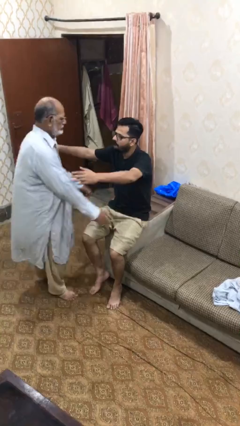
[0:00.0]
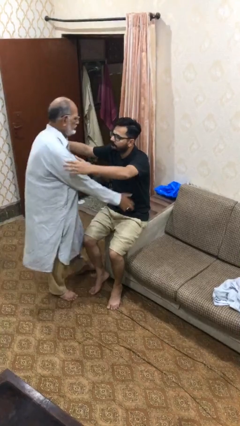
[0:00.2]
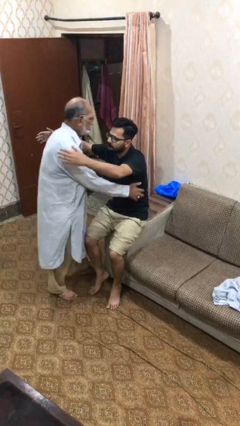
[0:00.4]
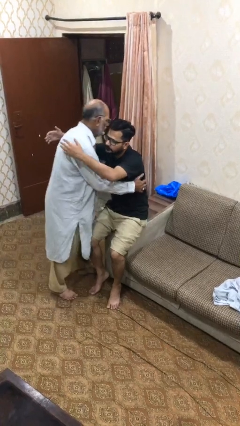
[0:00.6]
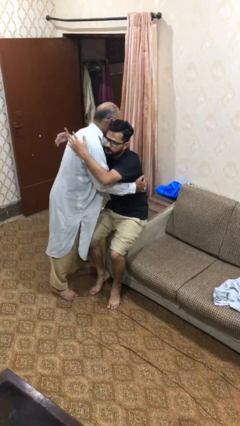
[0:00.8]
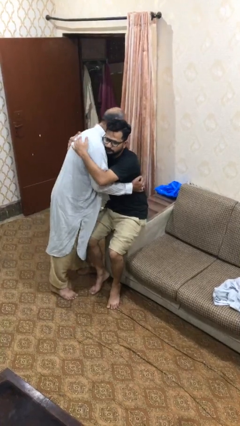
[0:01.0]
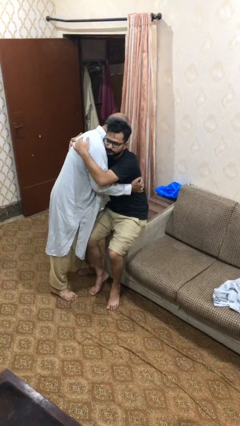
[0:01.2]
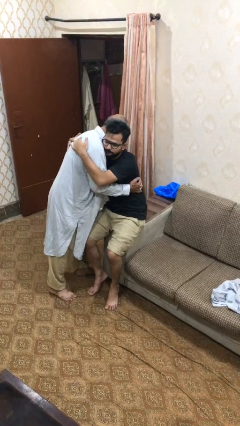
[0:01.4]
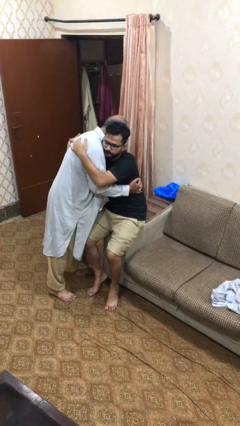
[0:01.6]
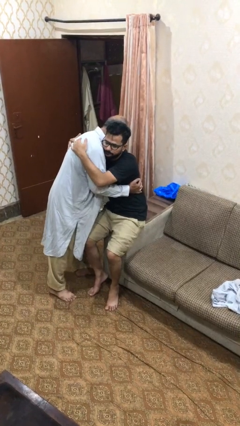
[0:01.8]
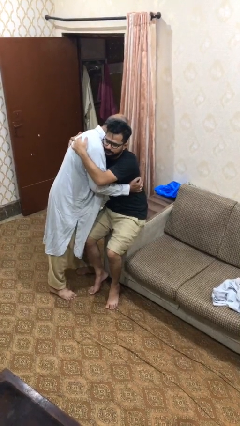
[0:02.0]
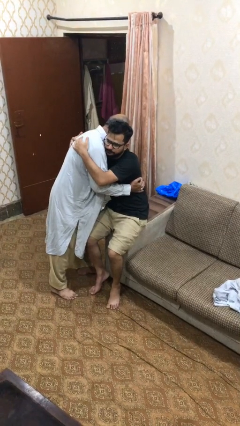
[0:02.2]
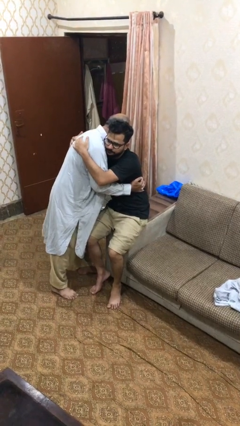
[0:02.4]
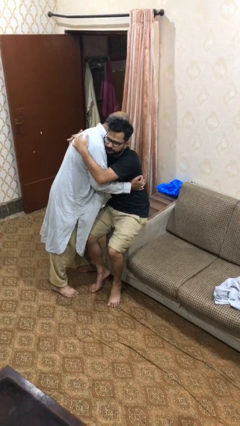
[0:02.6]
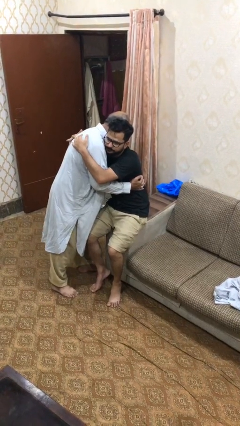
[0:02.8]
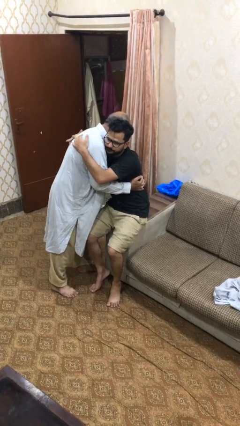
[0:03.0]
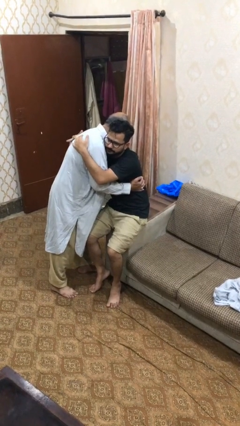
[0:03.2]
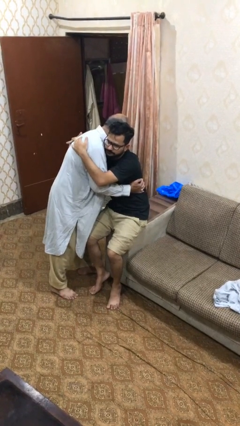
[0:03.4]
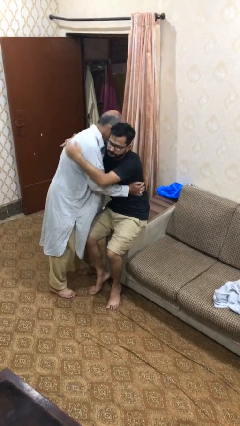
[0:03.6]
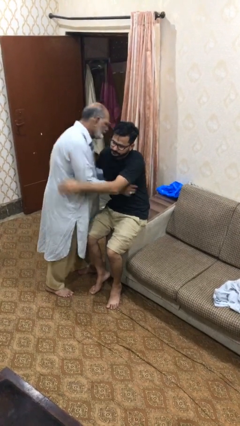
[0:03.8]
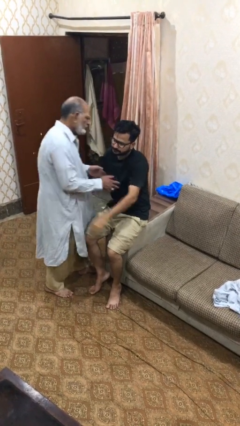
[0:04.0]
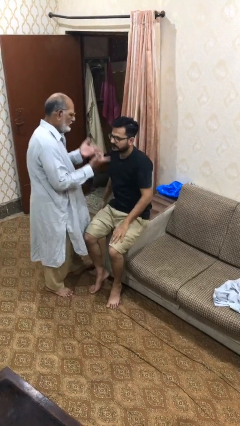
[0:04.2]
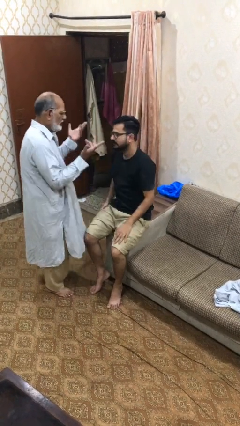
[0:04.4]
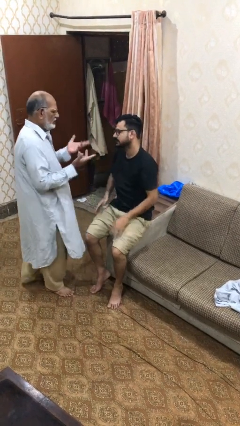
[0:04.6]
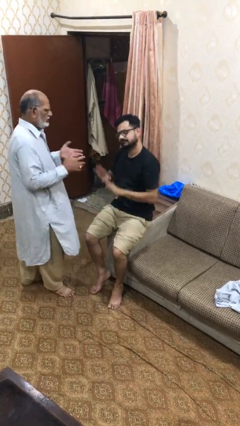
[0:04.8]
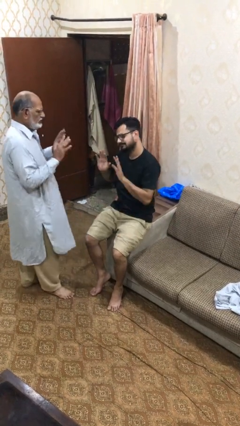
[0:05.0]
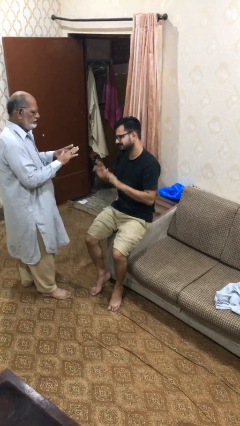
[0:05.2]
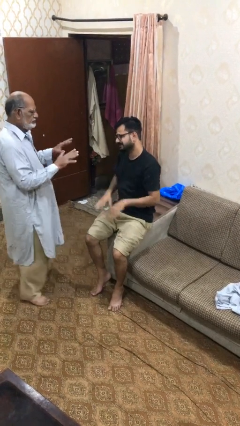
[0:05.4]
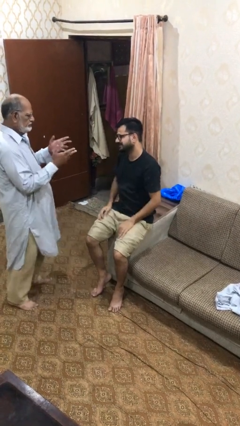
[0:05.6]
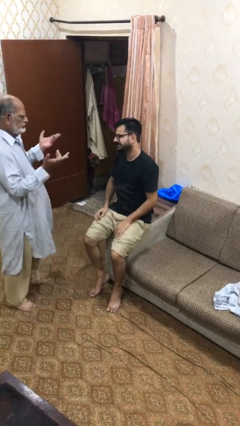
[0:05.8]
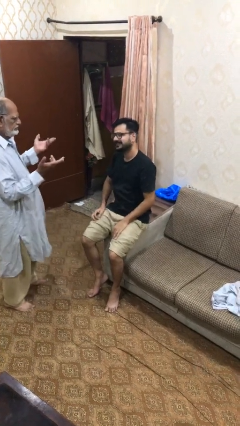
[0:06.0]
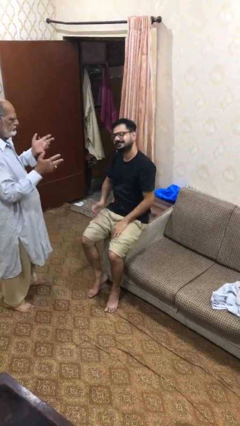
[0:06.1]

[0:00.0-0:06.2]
person embraces person

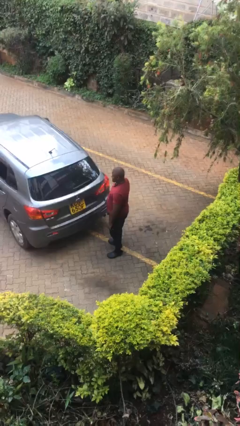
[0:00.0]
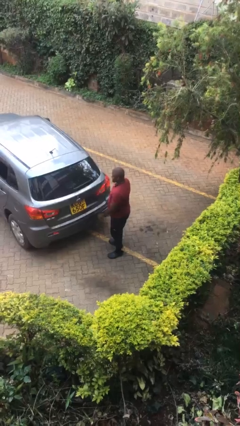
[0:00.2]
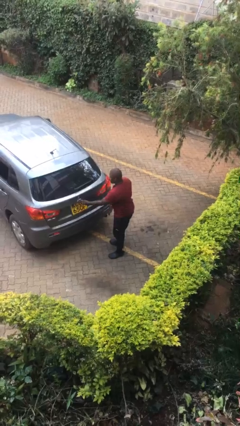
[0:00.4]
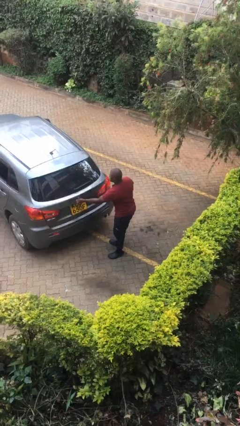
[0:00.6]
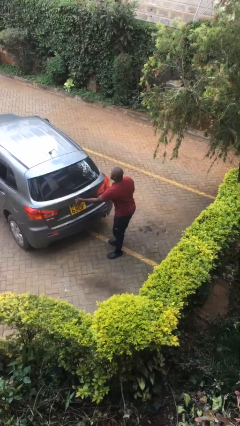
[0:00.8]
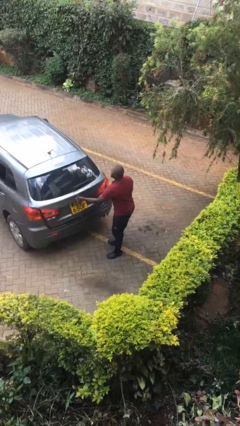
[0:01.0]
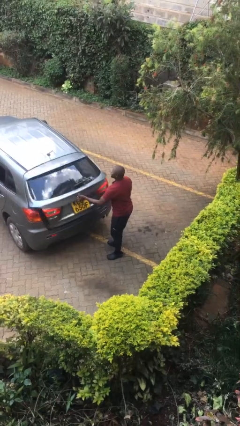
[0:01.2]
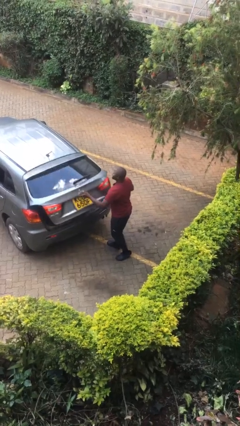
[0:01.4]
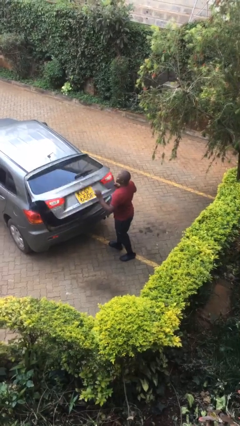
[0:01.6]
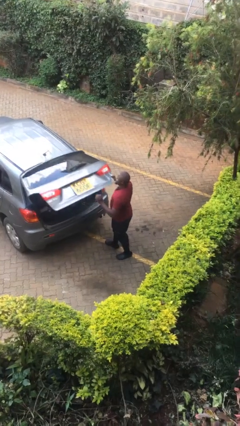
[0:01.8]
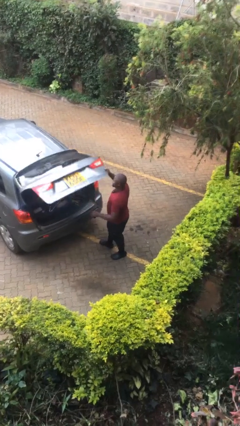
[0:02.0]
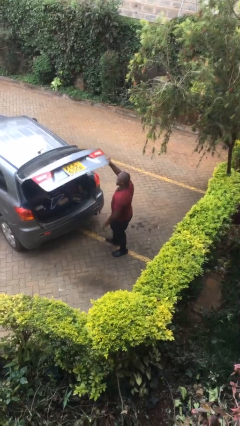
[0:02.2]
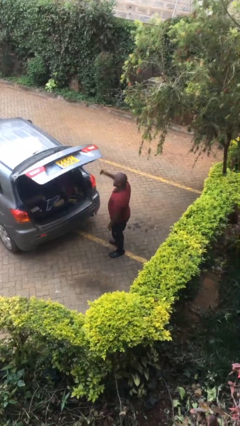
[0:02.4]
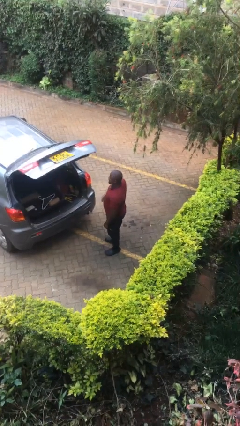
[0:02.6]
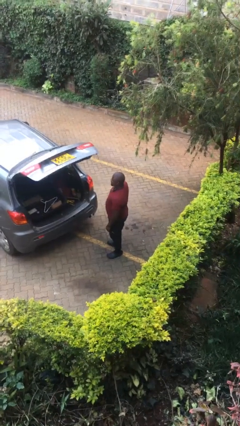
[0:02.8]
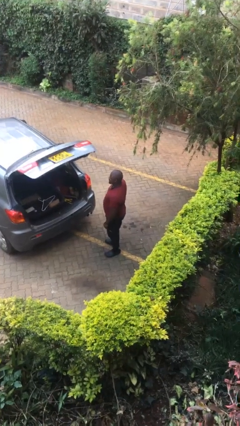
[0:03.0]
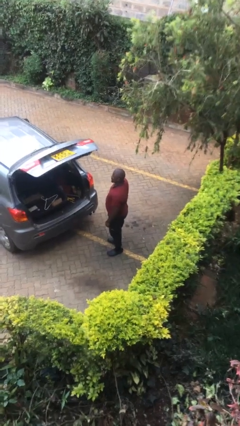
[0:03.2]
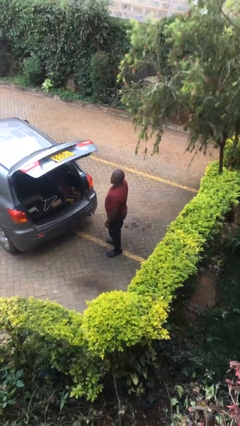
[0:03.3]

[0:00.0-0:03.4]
person opens car trunk

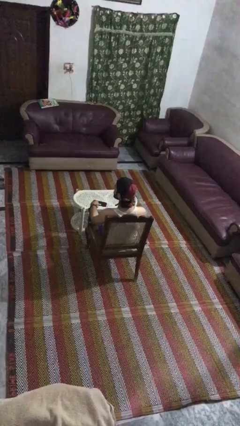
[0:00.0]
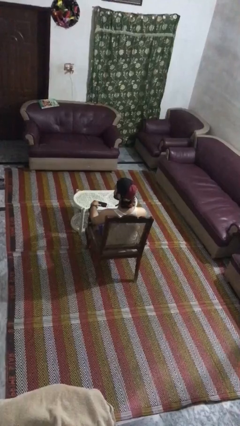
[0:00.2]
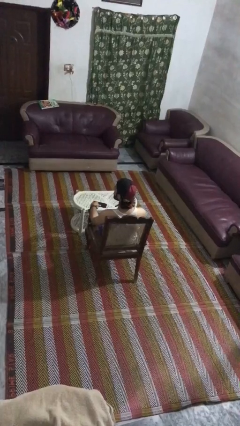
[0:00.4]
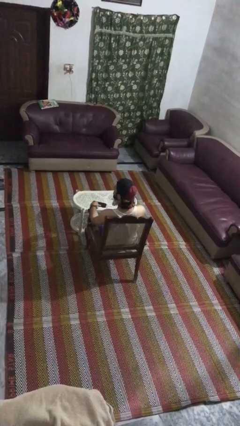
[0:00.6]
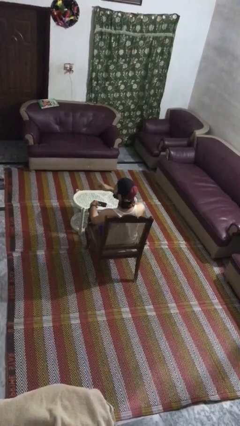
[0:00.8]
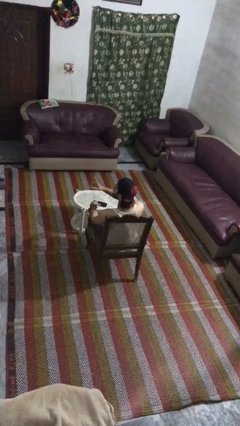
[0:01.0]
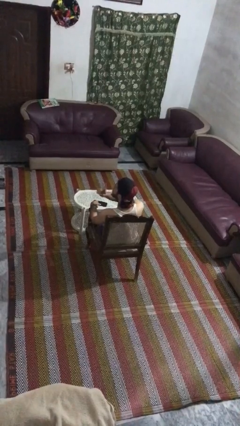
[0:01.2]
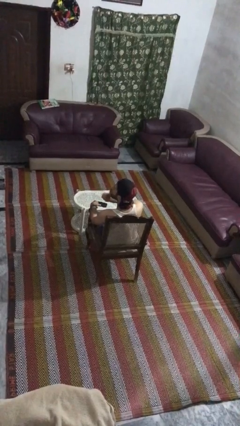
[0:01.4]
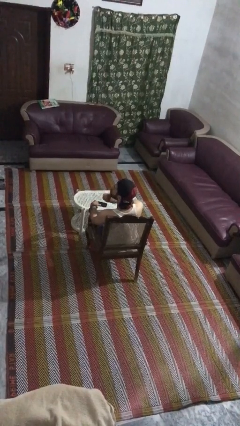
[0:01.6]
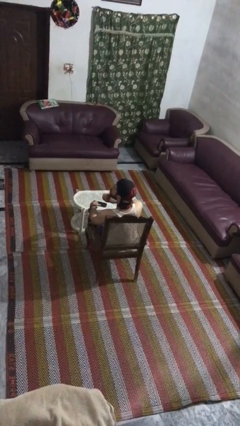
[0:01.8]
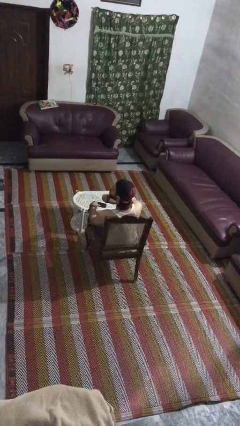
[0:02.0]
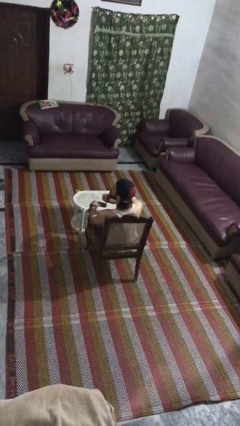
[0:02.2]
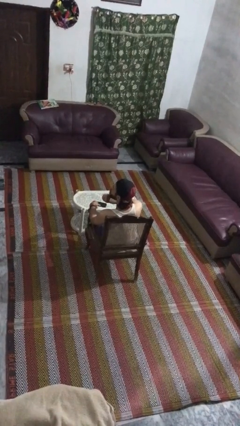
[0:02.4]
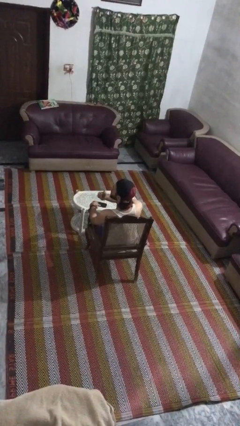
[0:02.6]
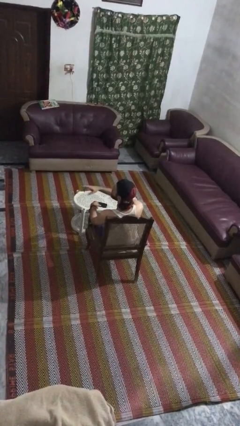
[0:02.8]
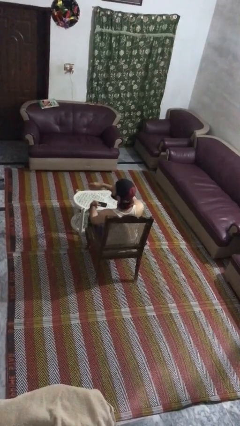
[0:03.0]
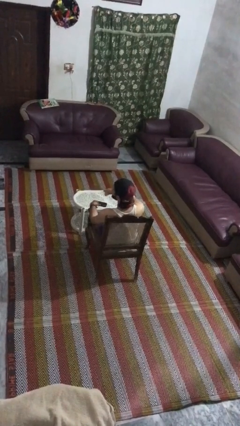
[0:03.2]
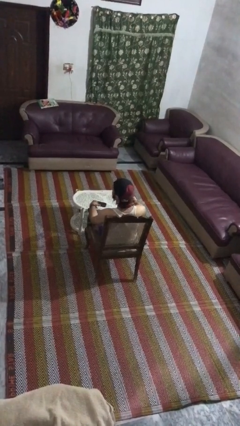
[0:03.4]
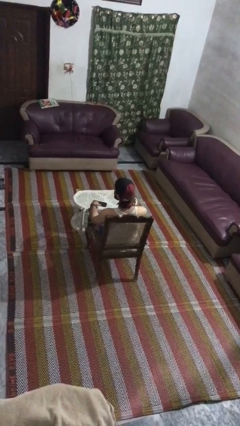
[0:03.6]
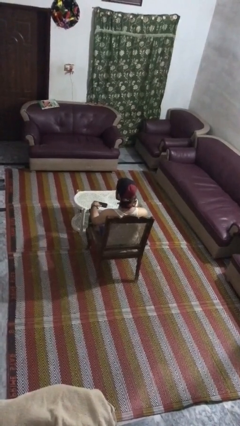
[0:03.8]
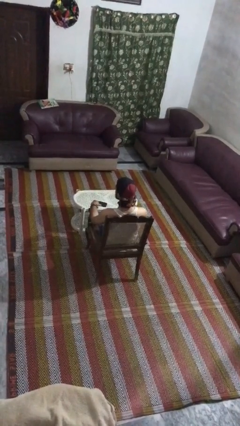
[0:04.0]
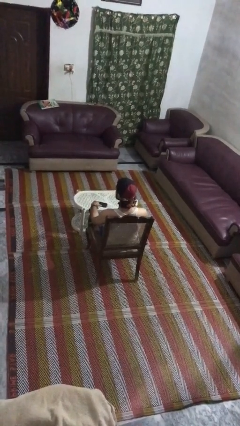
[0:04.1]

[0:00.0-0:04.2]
person gestures be quiet

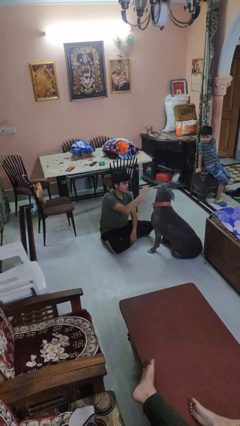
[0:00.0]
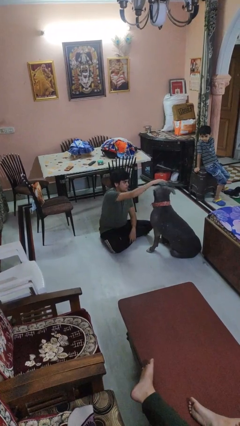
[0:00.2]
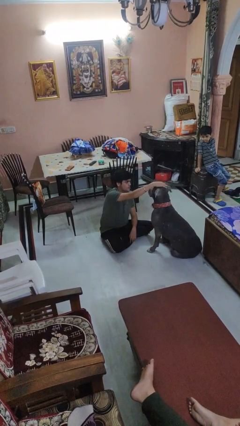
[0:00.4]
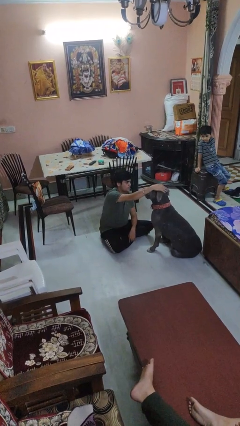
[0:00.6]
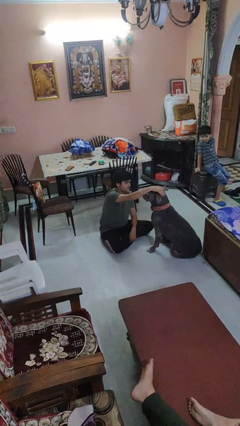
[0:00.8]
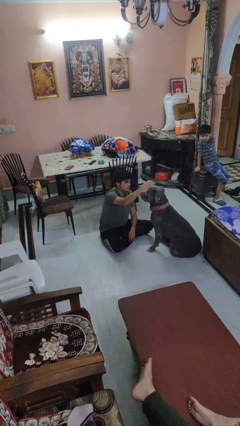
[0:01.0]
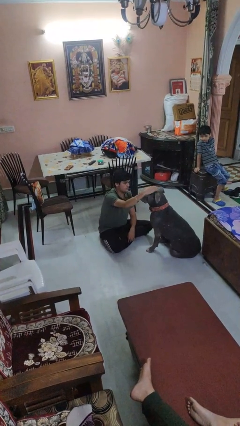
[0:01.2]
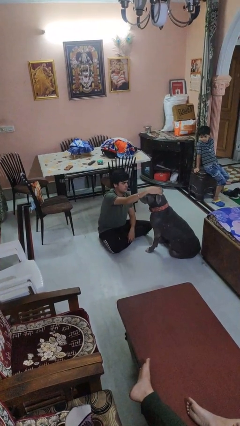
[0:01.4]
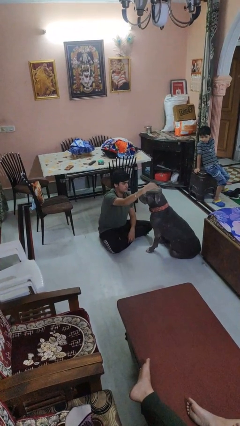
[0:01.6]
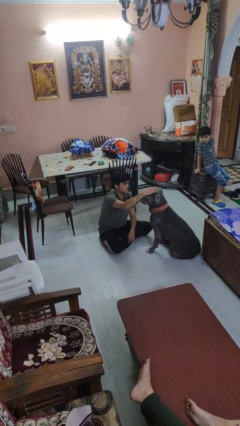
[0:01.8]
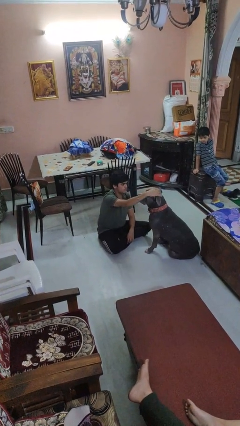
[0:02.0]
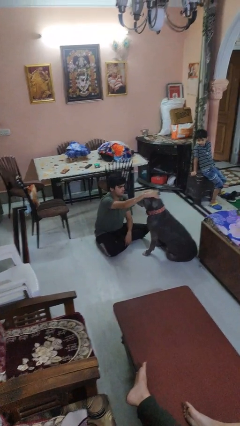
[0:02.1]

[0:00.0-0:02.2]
person pets dog

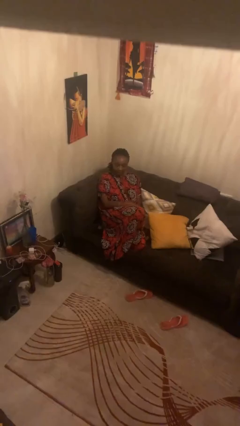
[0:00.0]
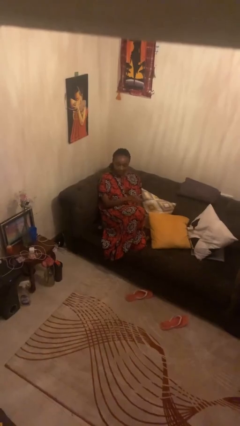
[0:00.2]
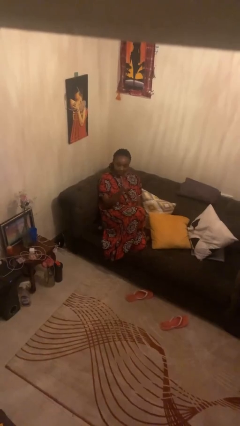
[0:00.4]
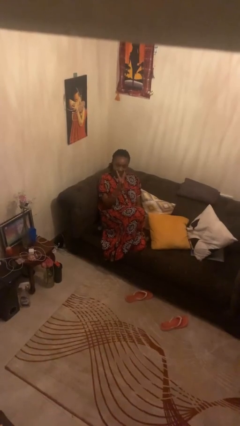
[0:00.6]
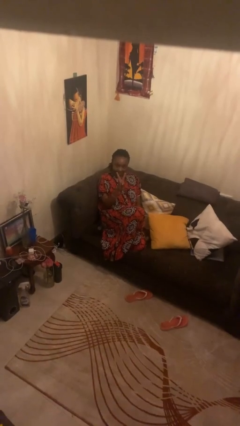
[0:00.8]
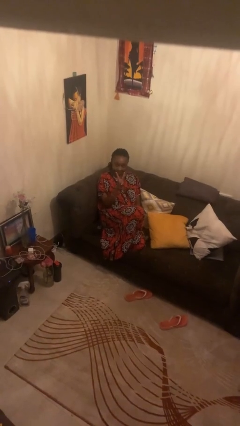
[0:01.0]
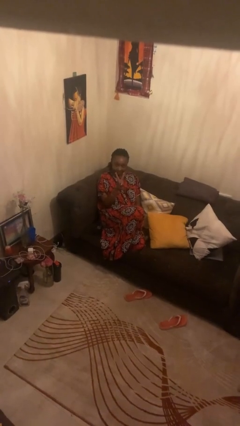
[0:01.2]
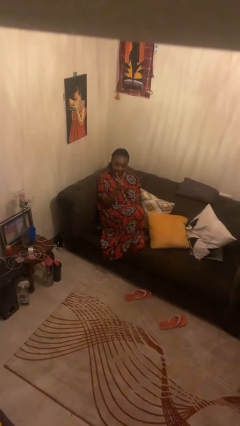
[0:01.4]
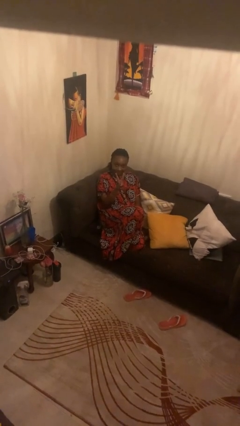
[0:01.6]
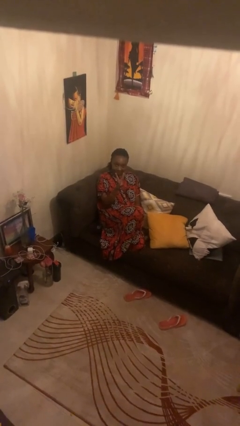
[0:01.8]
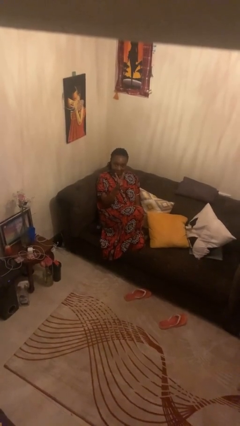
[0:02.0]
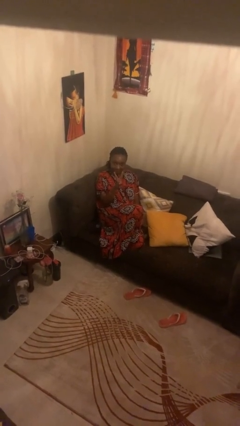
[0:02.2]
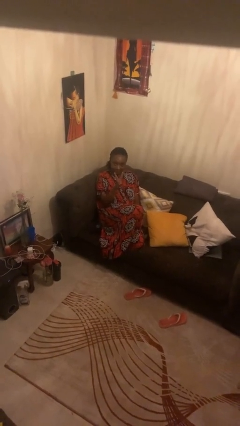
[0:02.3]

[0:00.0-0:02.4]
person gestures peace
